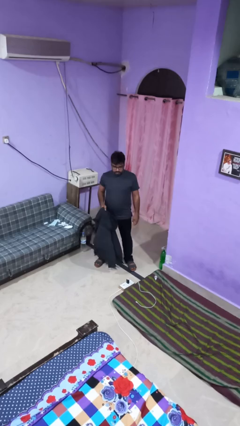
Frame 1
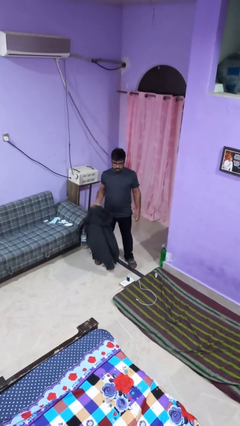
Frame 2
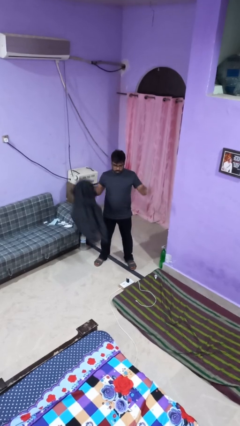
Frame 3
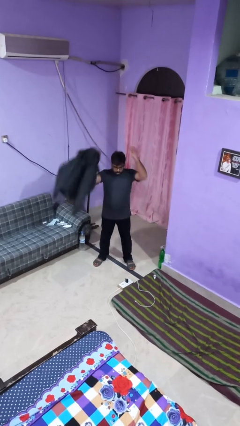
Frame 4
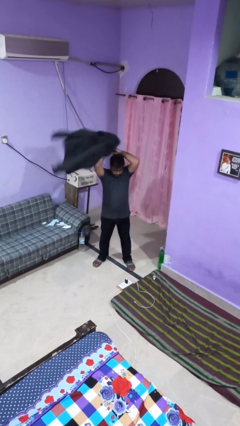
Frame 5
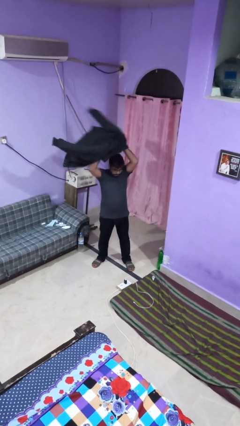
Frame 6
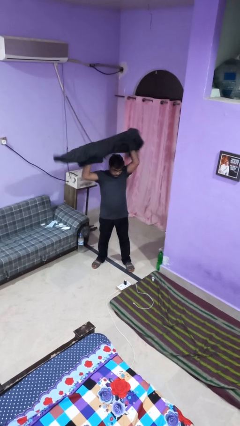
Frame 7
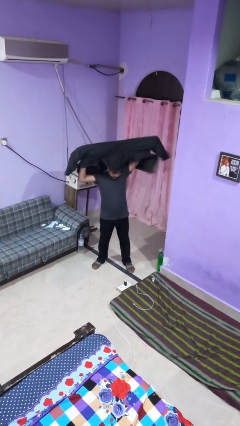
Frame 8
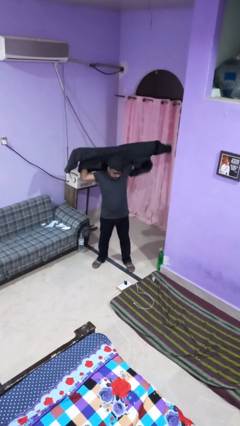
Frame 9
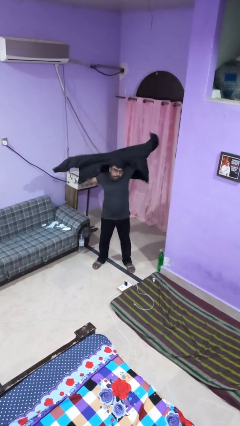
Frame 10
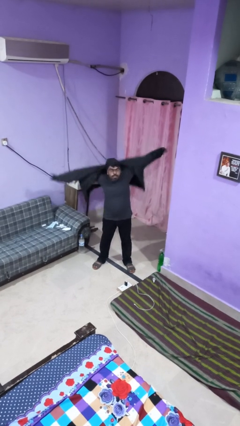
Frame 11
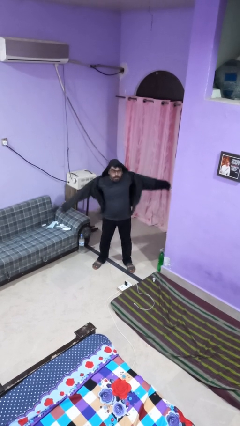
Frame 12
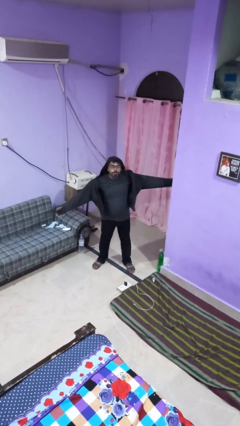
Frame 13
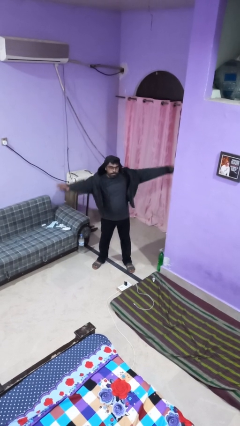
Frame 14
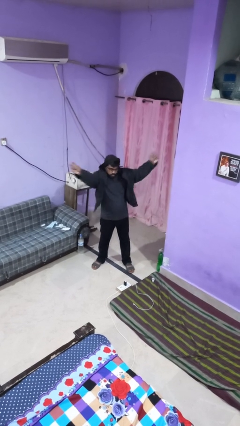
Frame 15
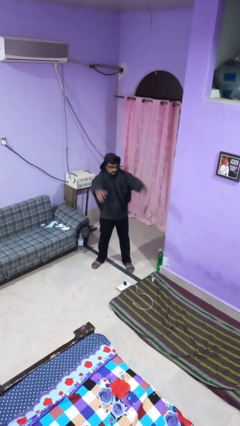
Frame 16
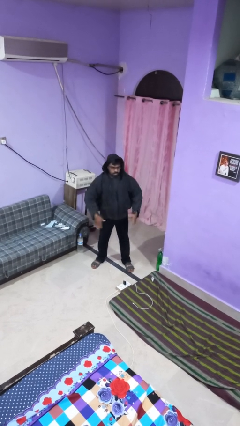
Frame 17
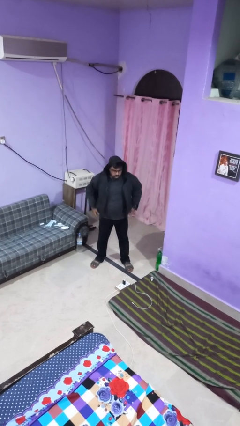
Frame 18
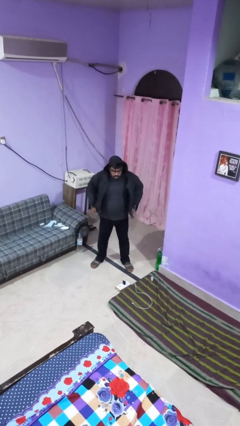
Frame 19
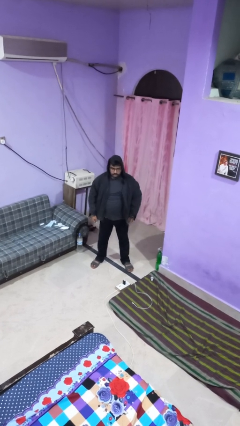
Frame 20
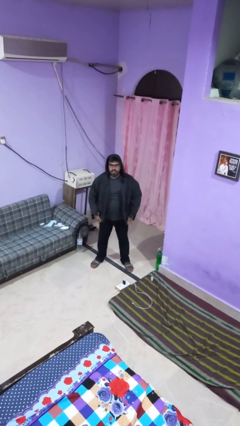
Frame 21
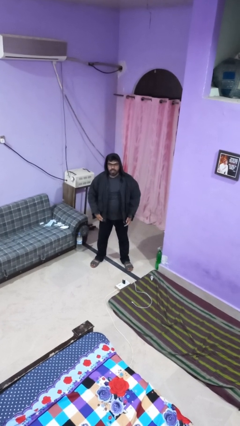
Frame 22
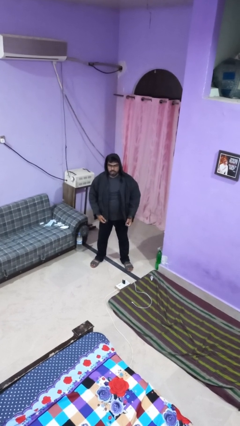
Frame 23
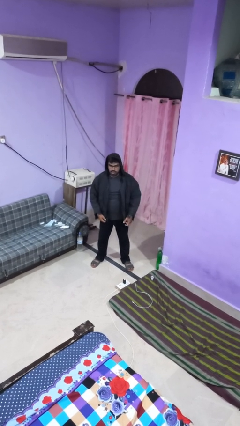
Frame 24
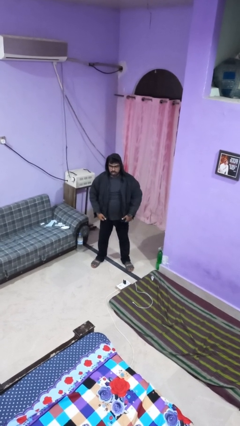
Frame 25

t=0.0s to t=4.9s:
person puts on jacket

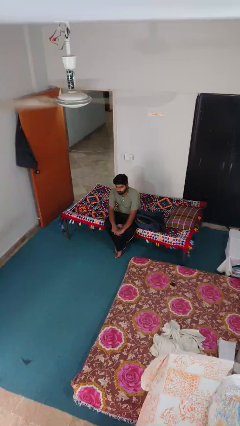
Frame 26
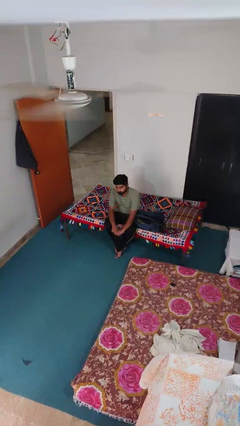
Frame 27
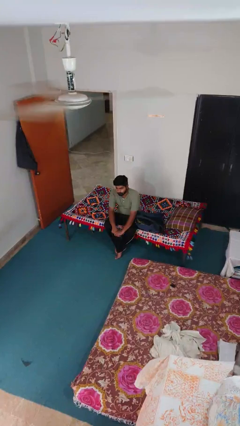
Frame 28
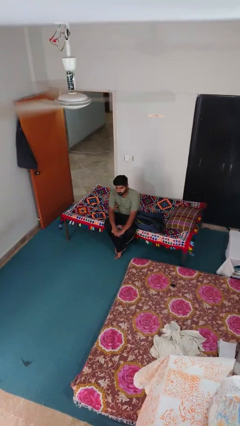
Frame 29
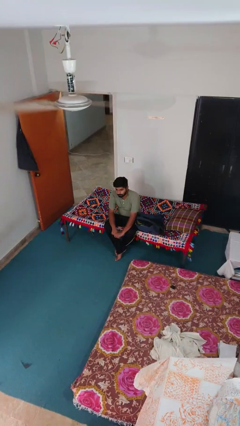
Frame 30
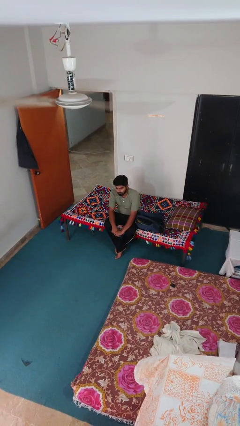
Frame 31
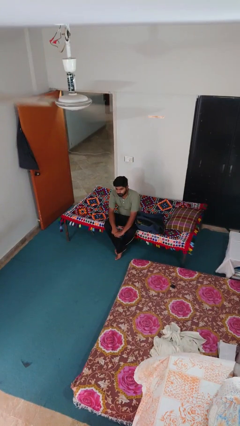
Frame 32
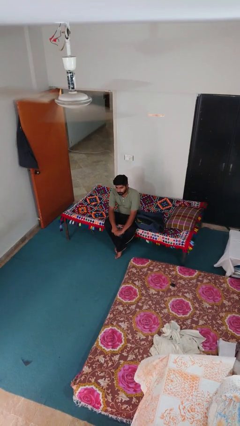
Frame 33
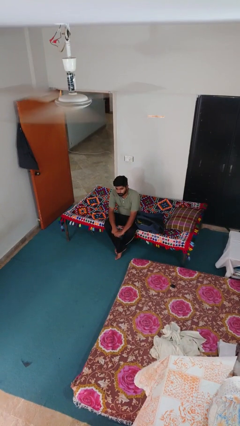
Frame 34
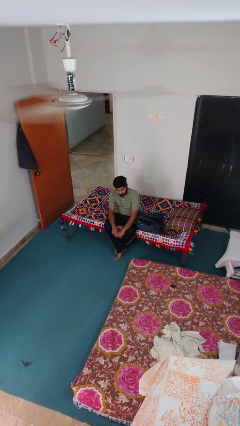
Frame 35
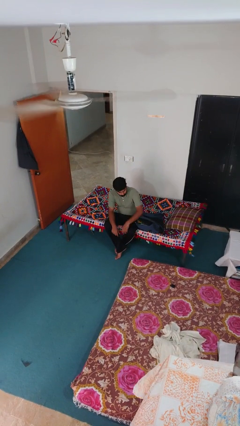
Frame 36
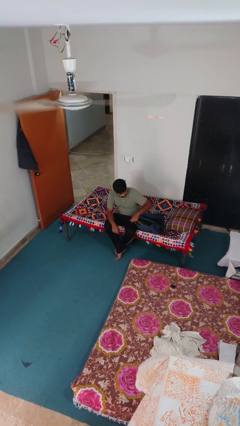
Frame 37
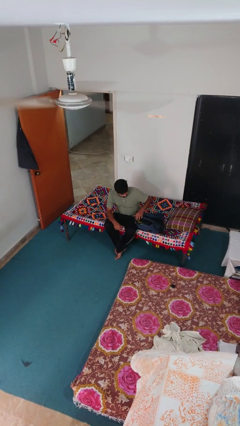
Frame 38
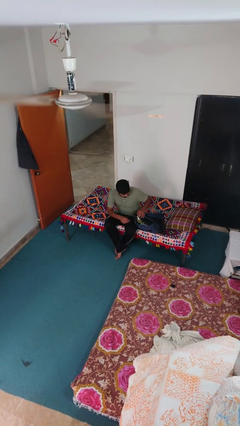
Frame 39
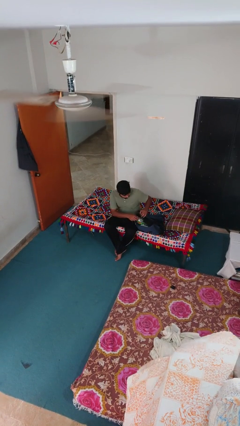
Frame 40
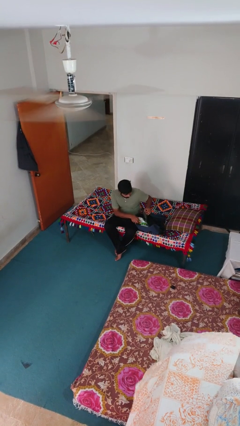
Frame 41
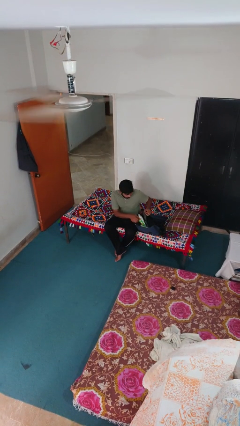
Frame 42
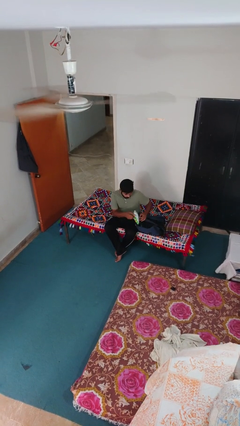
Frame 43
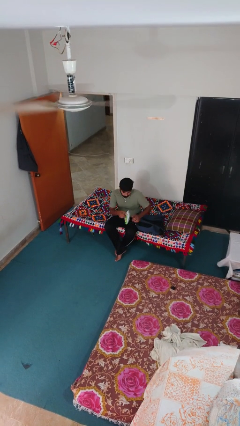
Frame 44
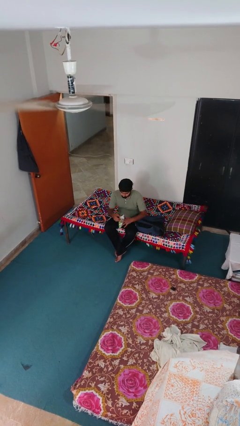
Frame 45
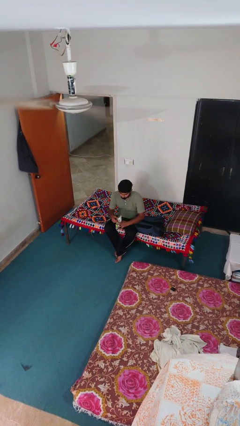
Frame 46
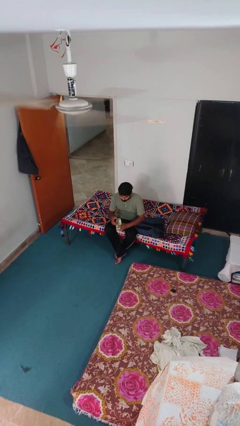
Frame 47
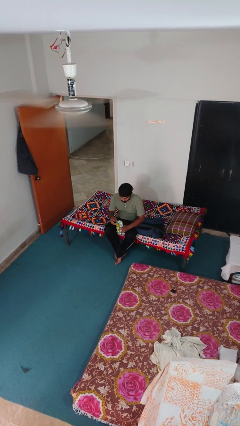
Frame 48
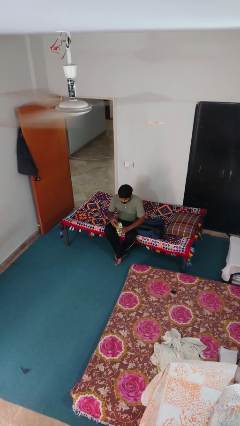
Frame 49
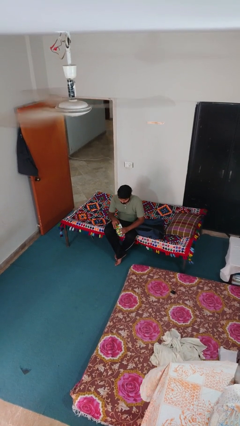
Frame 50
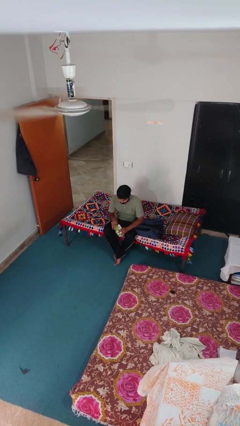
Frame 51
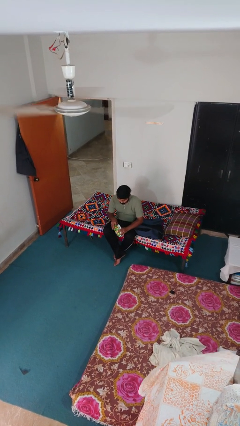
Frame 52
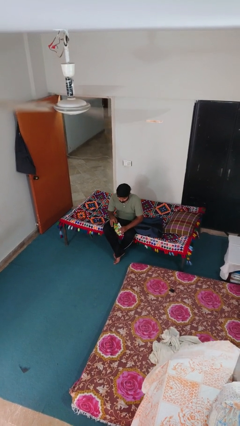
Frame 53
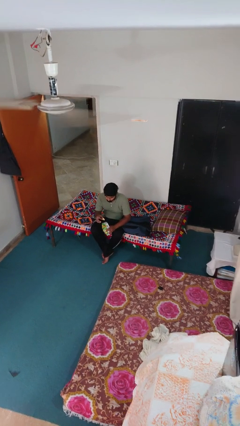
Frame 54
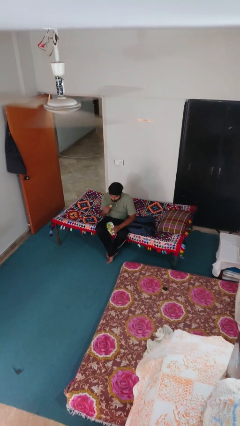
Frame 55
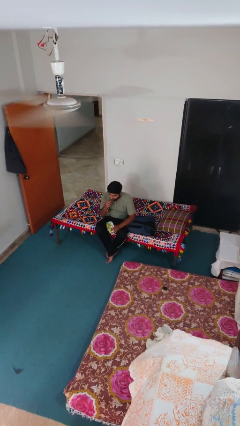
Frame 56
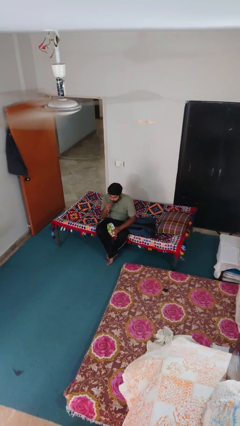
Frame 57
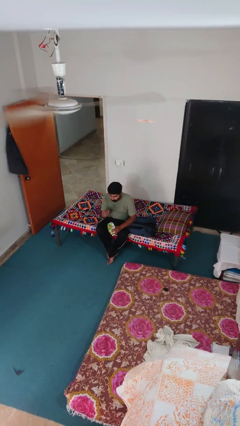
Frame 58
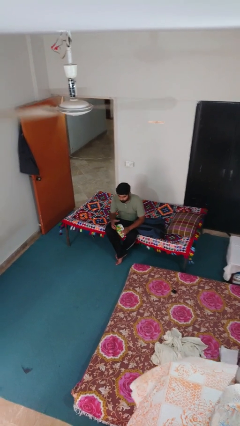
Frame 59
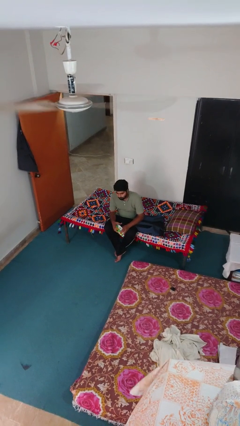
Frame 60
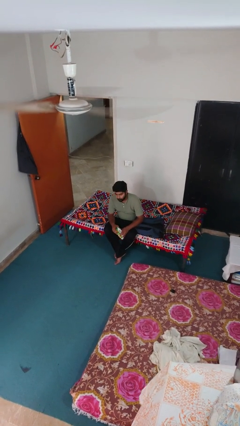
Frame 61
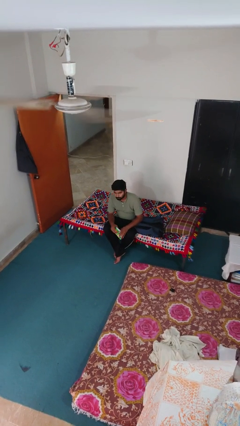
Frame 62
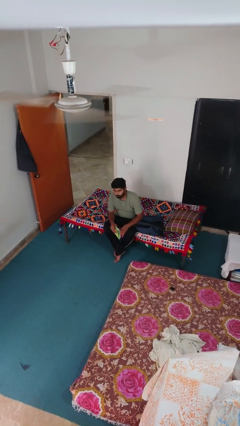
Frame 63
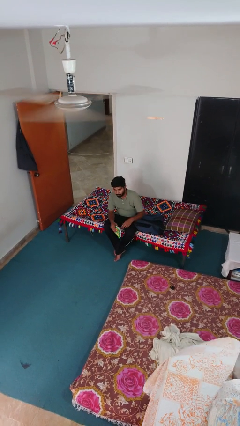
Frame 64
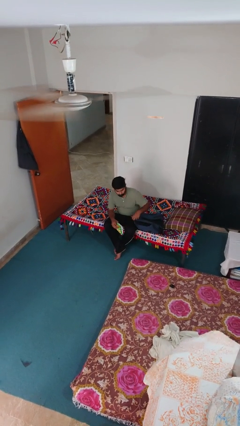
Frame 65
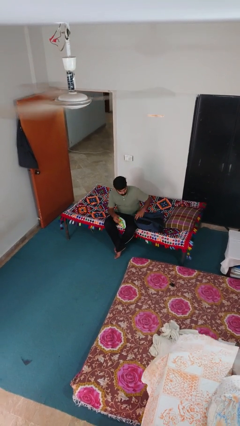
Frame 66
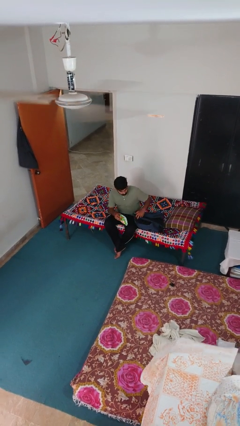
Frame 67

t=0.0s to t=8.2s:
person eats snack from bag

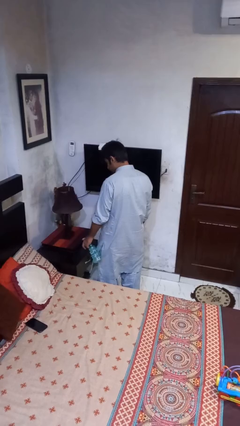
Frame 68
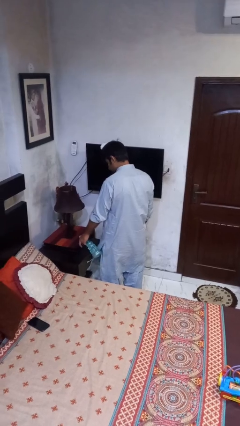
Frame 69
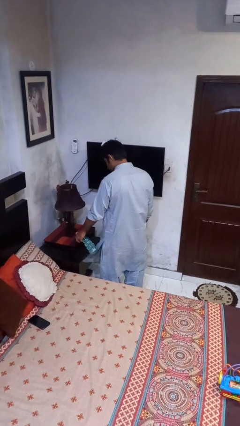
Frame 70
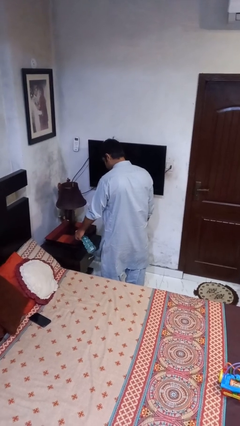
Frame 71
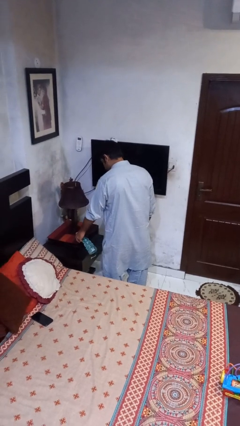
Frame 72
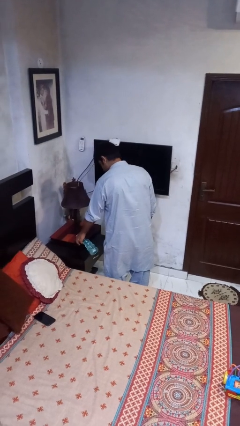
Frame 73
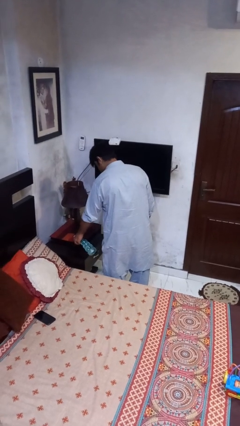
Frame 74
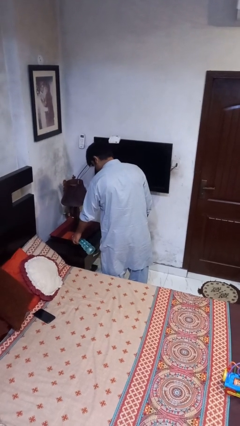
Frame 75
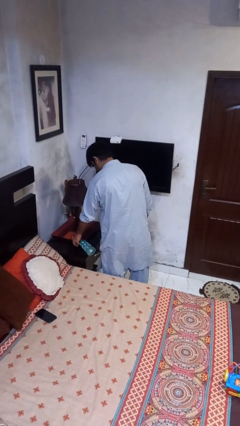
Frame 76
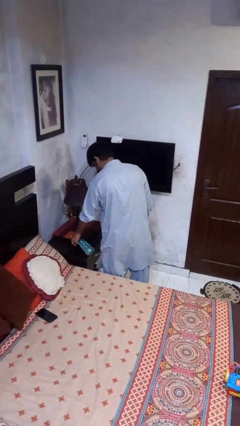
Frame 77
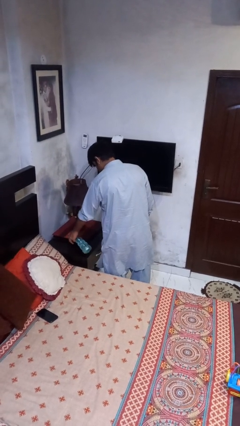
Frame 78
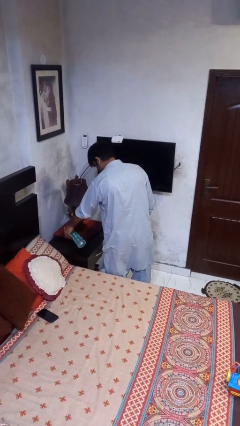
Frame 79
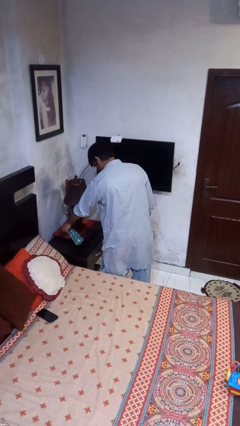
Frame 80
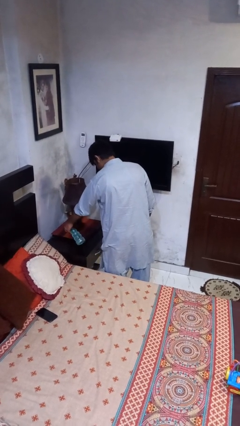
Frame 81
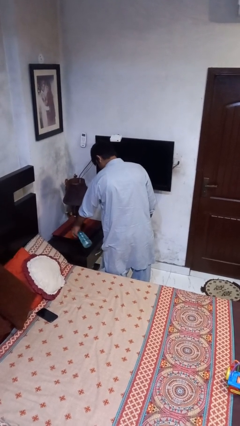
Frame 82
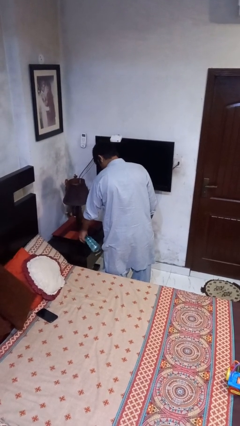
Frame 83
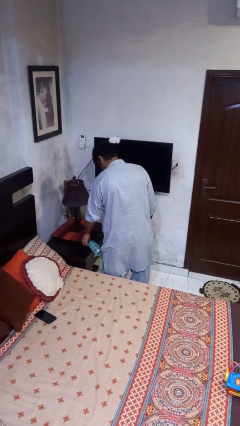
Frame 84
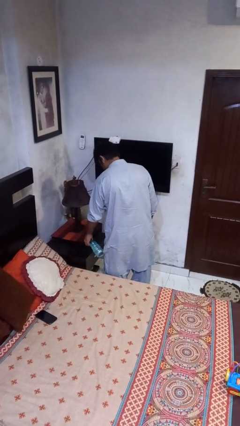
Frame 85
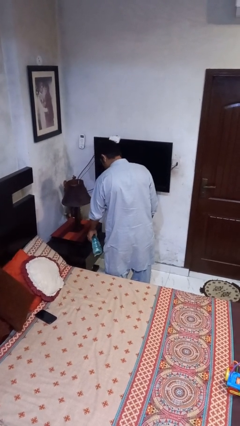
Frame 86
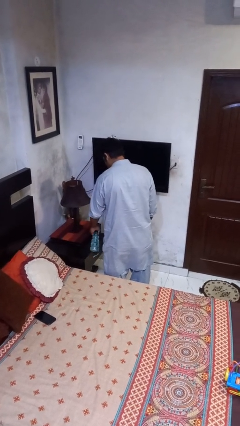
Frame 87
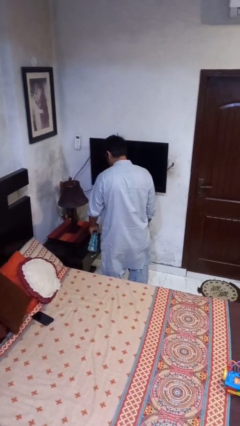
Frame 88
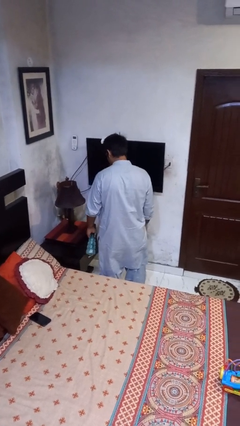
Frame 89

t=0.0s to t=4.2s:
person sprays from bottle

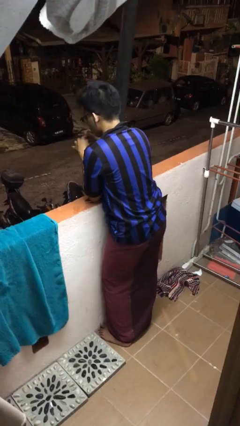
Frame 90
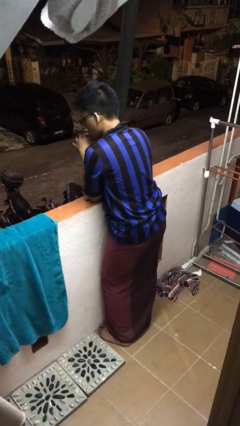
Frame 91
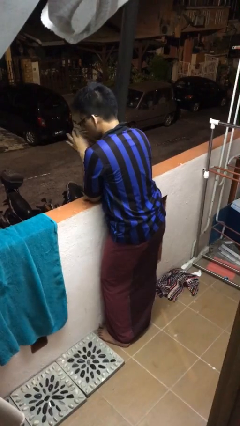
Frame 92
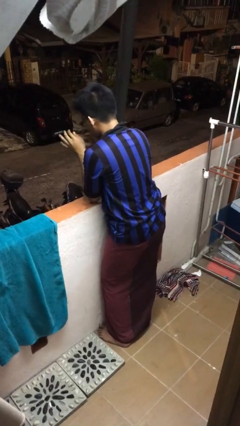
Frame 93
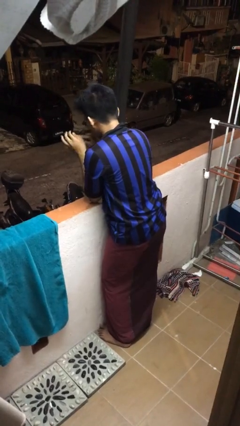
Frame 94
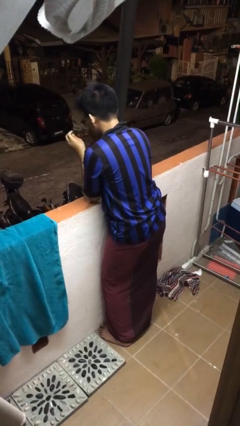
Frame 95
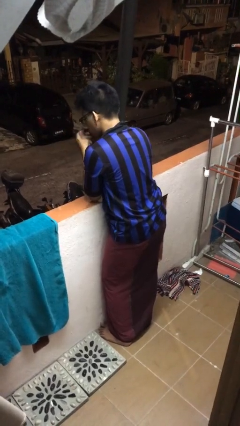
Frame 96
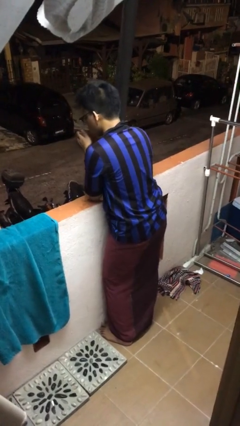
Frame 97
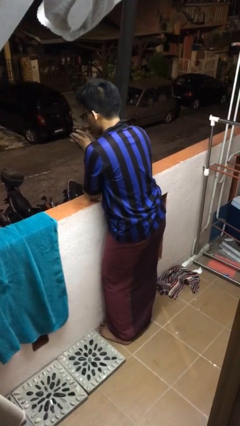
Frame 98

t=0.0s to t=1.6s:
person blows into hands
